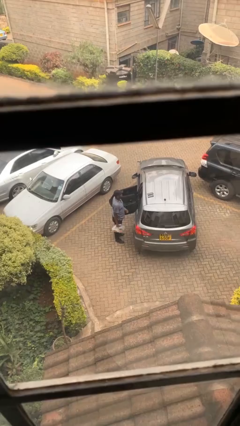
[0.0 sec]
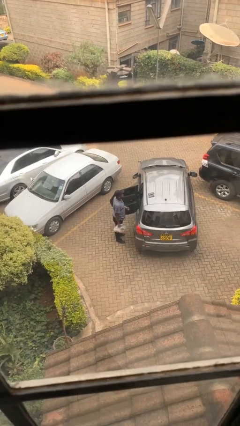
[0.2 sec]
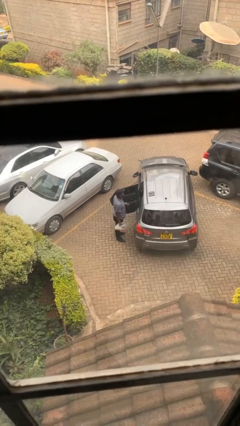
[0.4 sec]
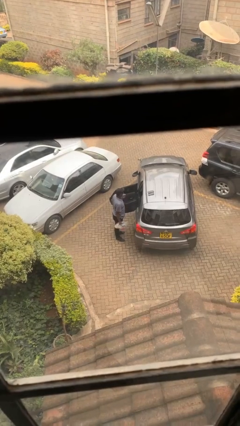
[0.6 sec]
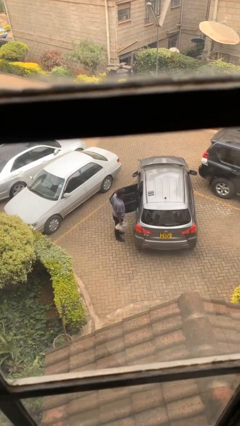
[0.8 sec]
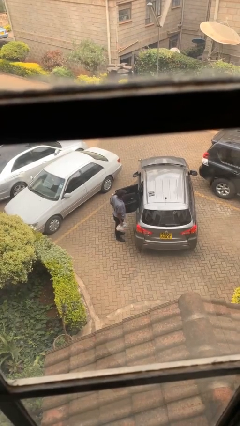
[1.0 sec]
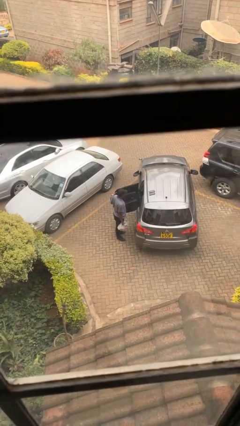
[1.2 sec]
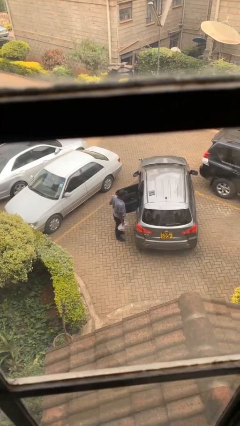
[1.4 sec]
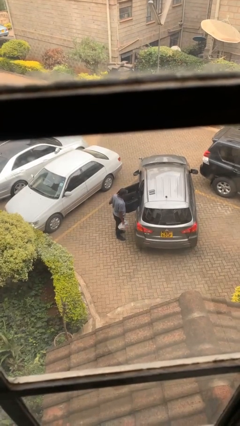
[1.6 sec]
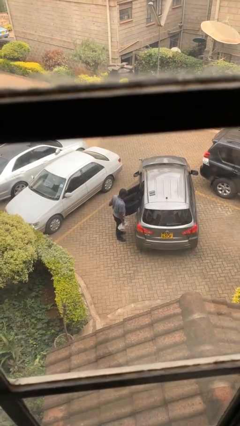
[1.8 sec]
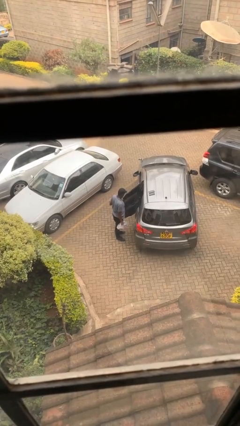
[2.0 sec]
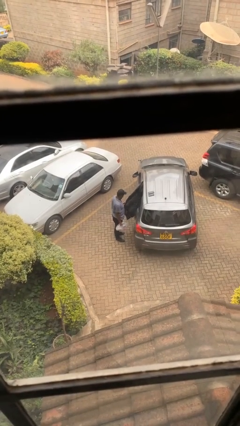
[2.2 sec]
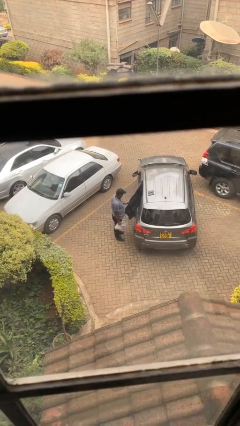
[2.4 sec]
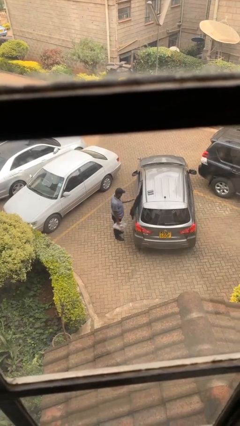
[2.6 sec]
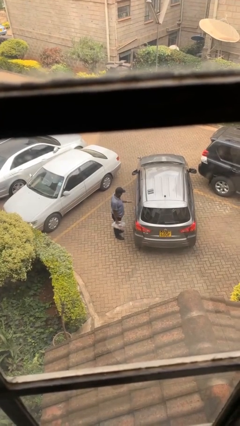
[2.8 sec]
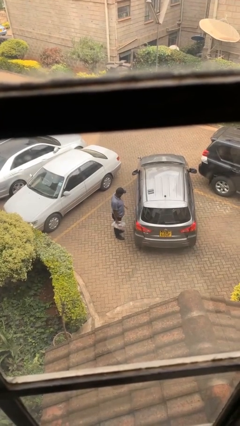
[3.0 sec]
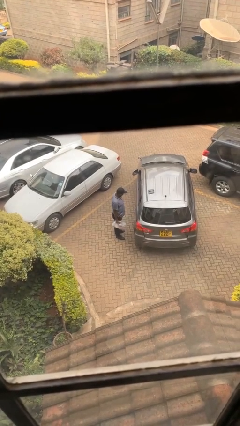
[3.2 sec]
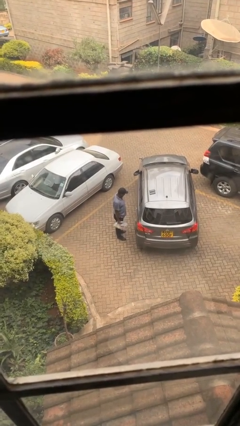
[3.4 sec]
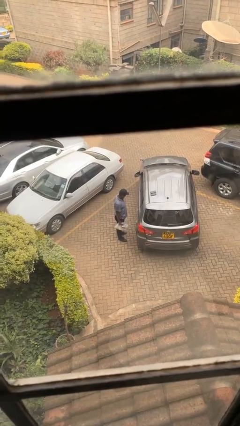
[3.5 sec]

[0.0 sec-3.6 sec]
person closes car door

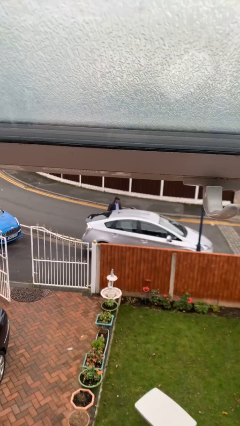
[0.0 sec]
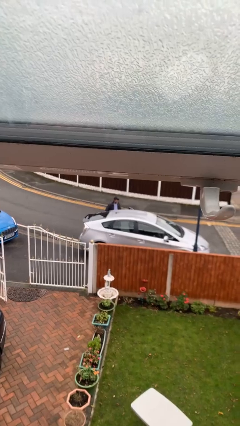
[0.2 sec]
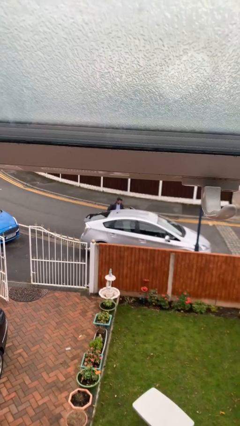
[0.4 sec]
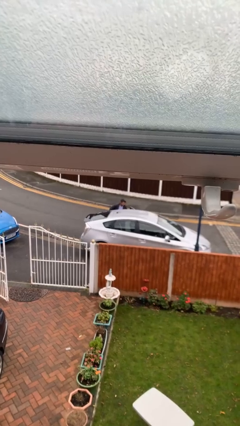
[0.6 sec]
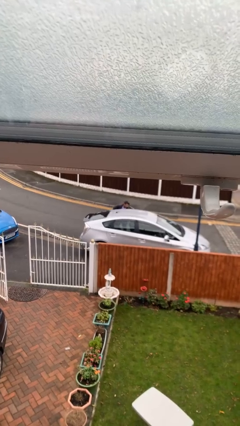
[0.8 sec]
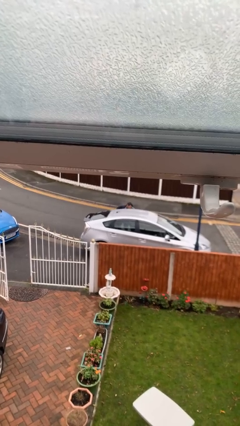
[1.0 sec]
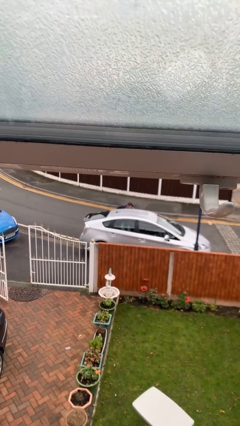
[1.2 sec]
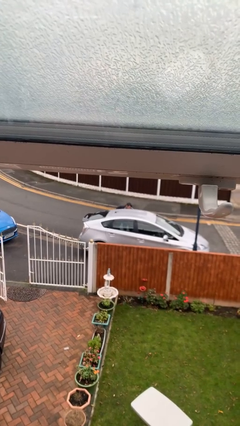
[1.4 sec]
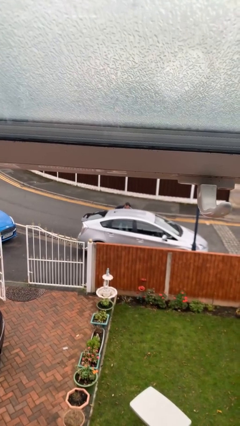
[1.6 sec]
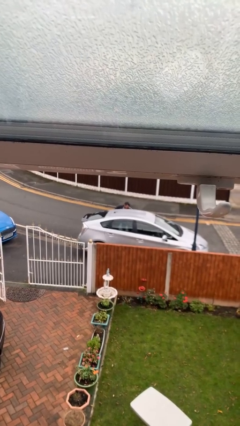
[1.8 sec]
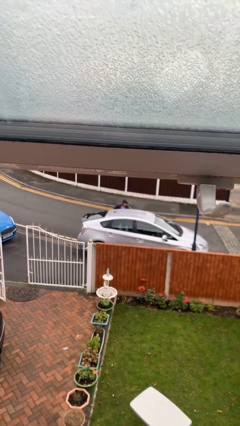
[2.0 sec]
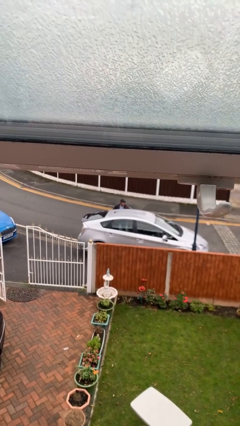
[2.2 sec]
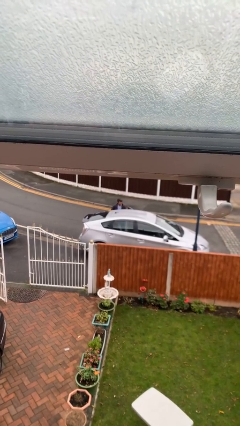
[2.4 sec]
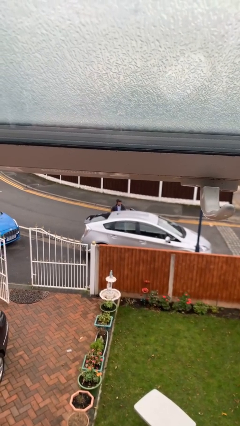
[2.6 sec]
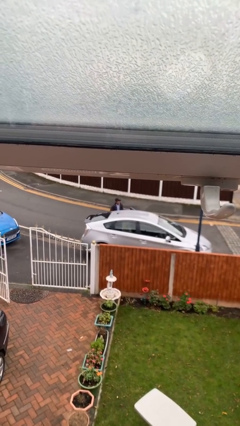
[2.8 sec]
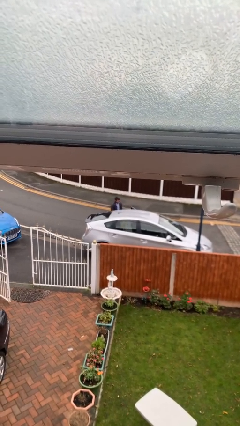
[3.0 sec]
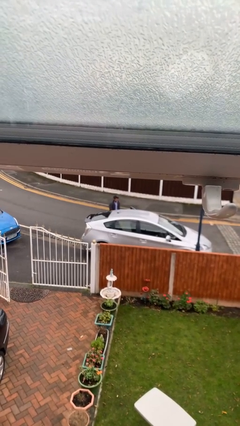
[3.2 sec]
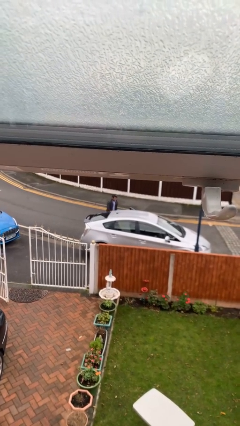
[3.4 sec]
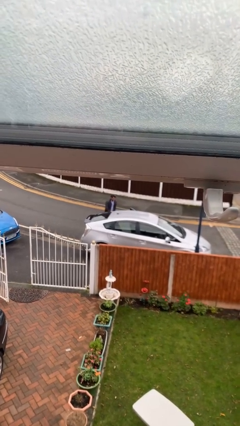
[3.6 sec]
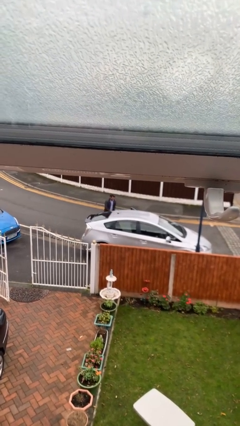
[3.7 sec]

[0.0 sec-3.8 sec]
person unloads car

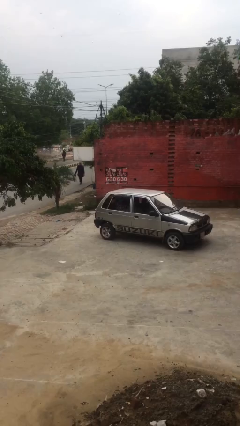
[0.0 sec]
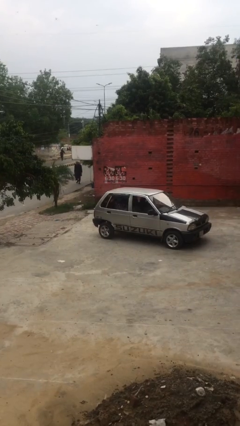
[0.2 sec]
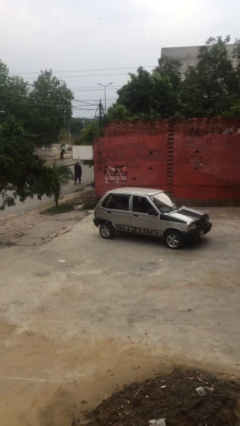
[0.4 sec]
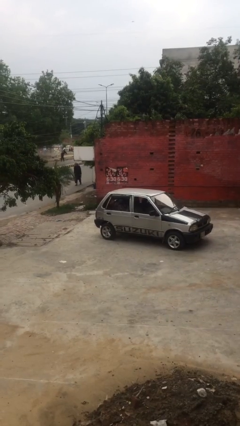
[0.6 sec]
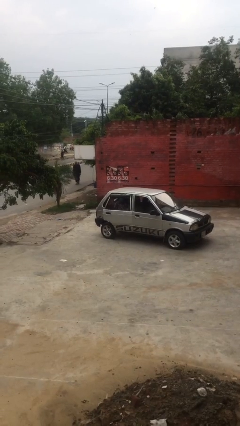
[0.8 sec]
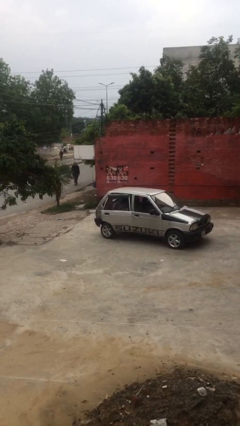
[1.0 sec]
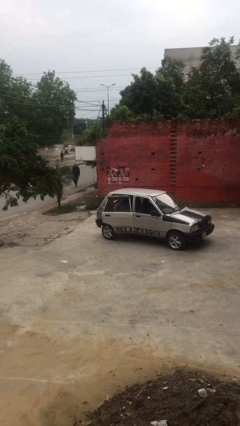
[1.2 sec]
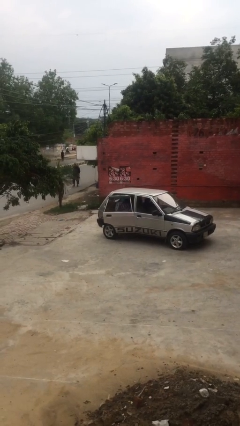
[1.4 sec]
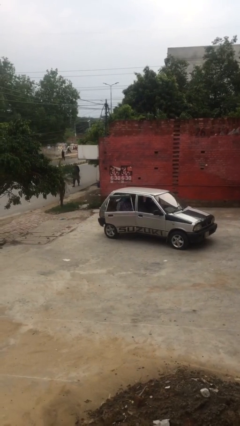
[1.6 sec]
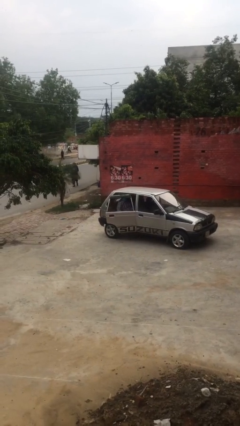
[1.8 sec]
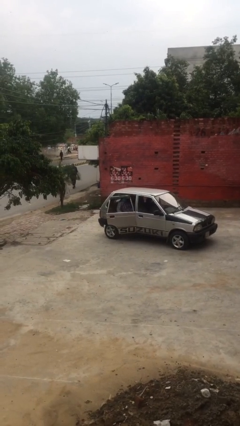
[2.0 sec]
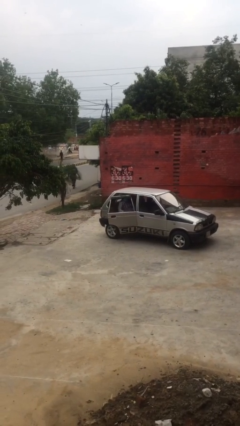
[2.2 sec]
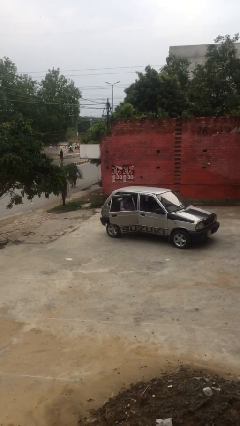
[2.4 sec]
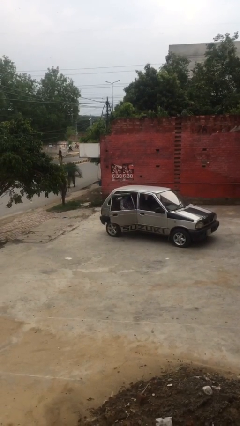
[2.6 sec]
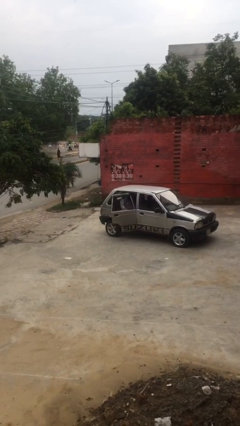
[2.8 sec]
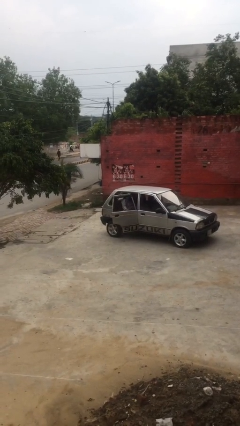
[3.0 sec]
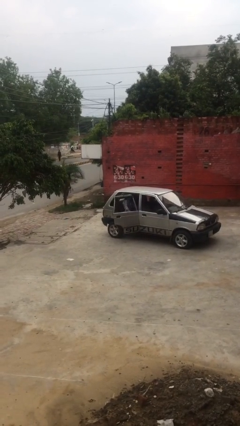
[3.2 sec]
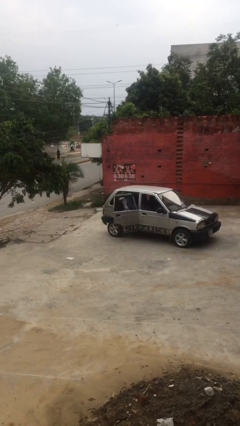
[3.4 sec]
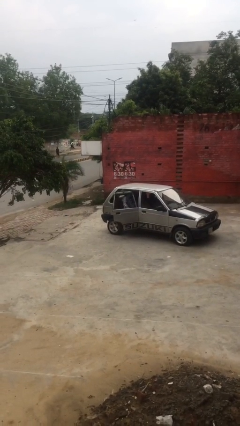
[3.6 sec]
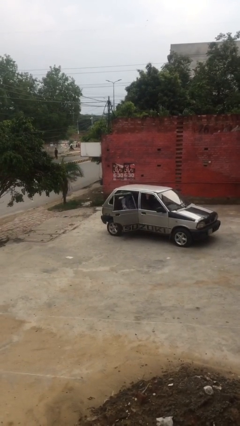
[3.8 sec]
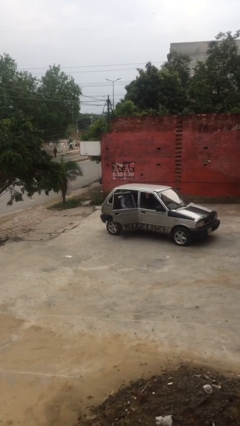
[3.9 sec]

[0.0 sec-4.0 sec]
person opens car door

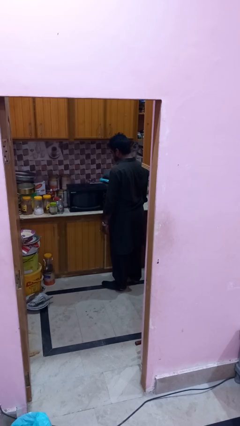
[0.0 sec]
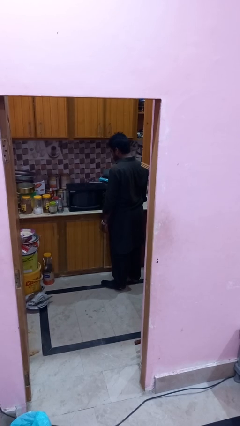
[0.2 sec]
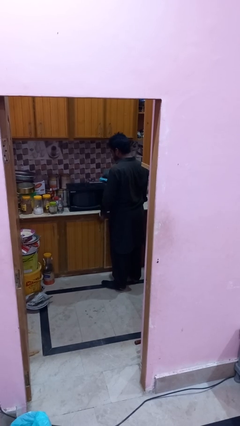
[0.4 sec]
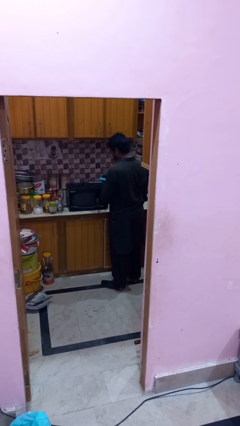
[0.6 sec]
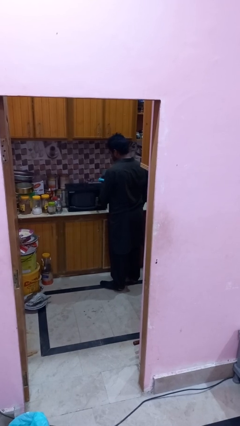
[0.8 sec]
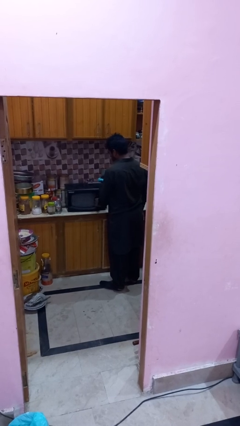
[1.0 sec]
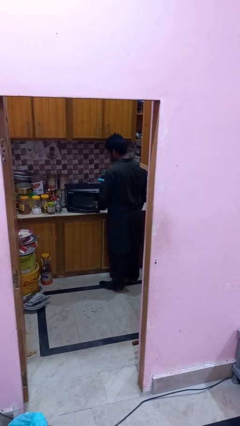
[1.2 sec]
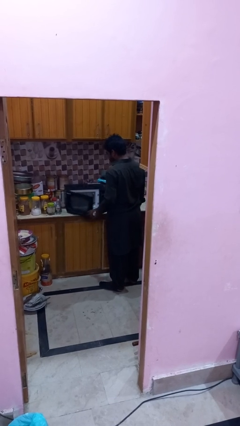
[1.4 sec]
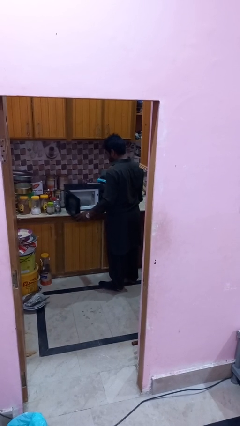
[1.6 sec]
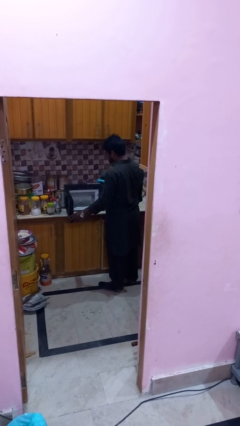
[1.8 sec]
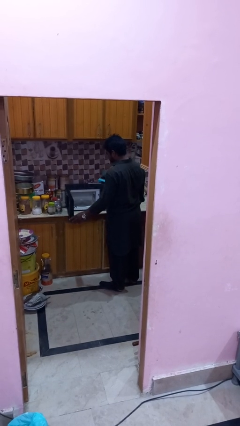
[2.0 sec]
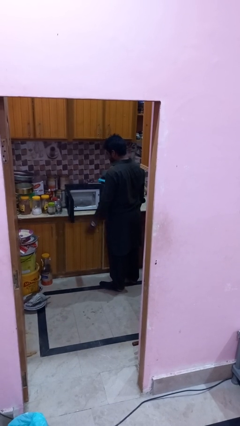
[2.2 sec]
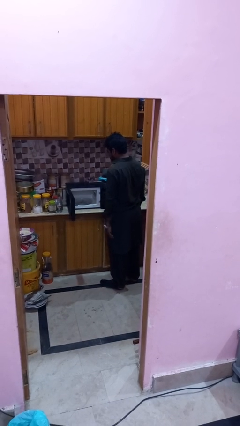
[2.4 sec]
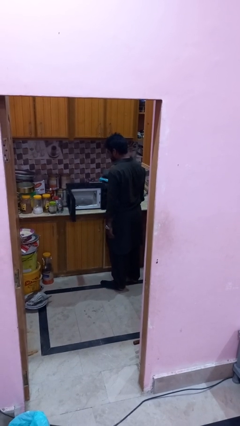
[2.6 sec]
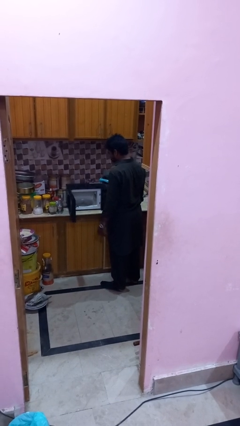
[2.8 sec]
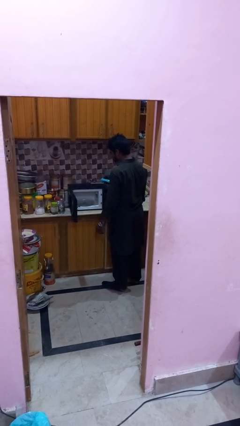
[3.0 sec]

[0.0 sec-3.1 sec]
person opens oven door

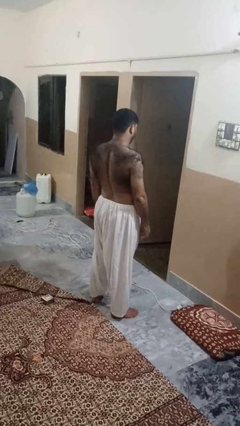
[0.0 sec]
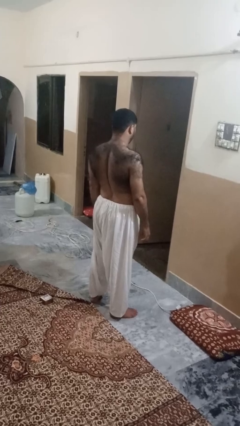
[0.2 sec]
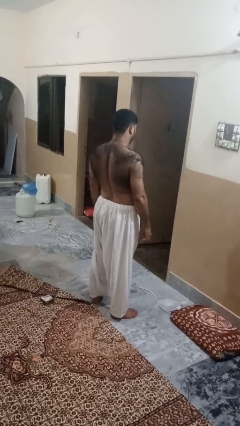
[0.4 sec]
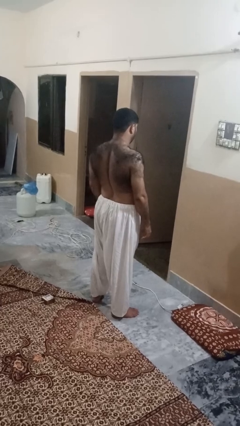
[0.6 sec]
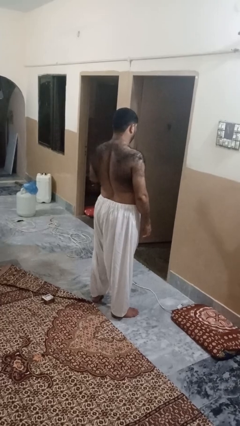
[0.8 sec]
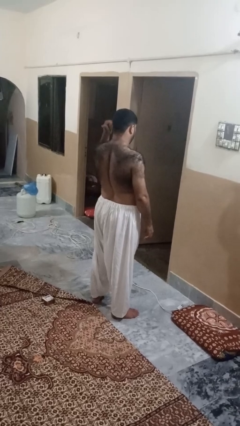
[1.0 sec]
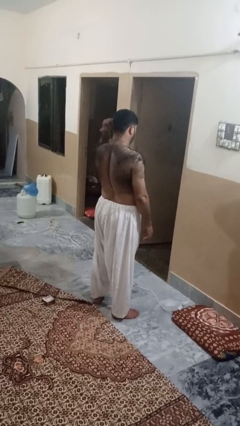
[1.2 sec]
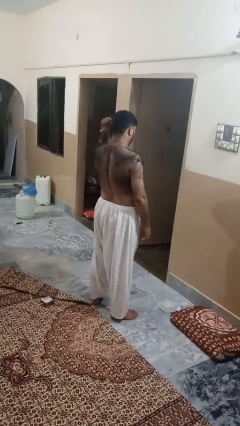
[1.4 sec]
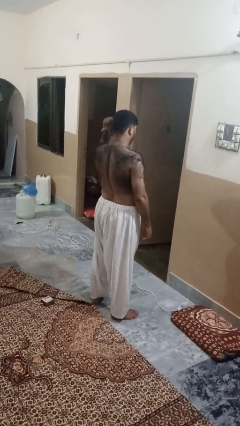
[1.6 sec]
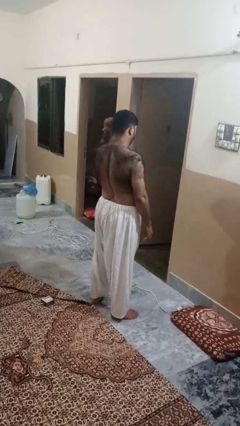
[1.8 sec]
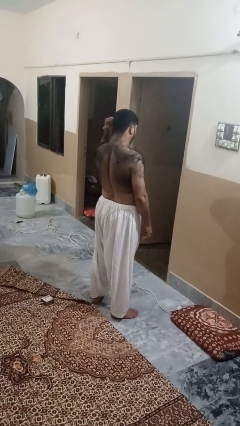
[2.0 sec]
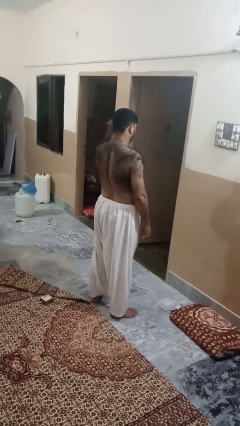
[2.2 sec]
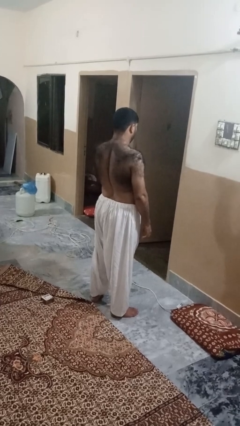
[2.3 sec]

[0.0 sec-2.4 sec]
person gestures behind me

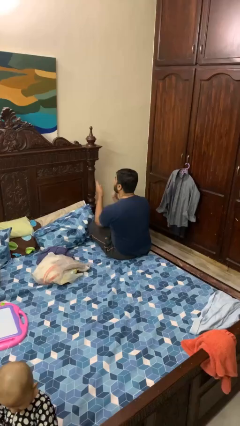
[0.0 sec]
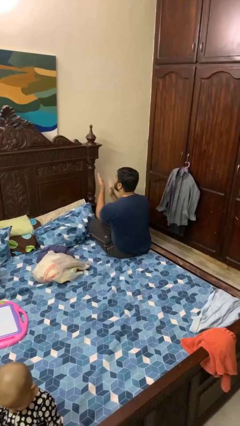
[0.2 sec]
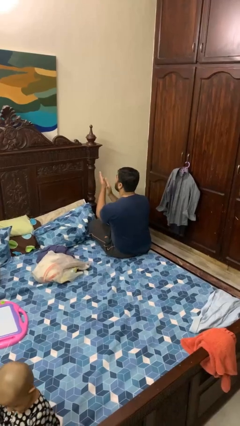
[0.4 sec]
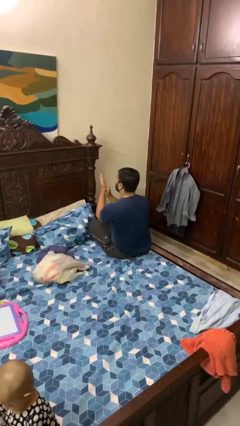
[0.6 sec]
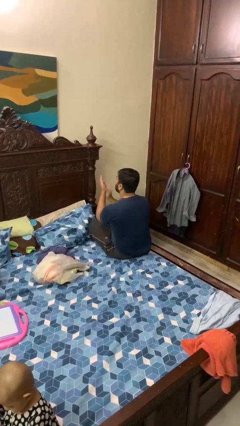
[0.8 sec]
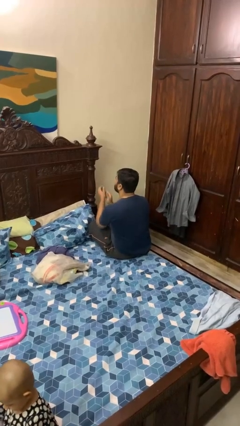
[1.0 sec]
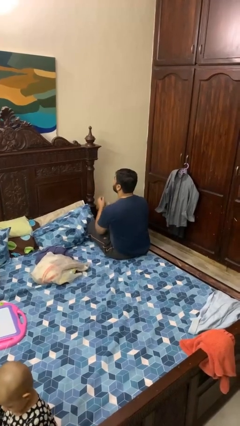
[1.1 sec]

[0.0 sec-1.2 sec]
person claps hands
